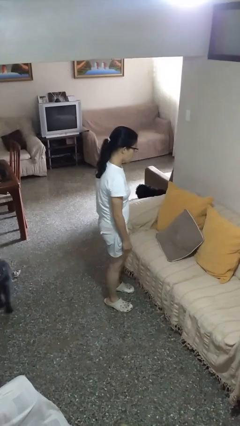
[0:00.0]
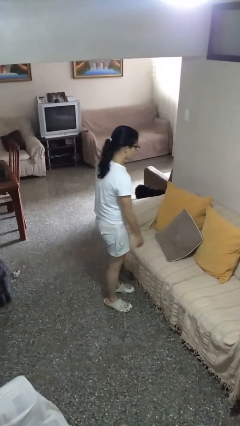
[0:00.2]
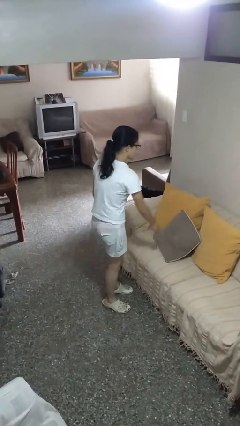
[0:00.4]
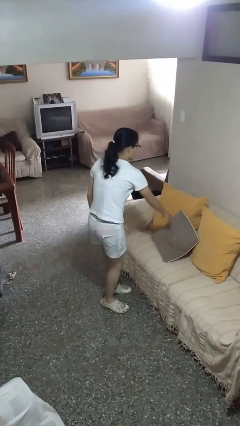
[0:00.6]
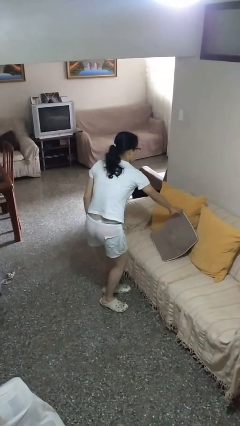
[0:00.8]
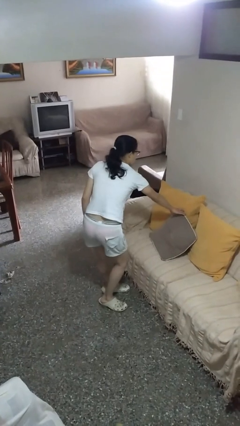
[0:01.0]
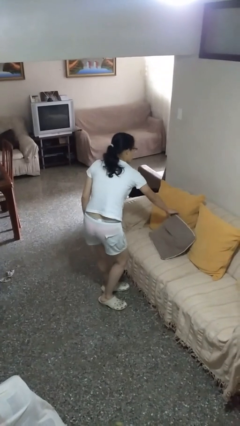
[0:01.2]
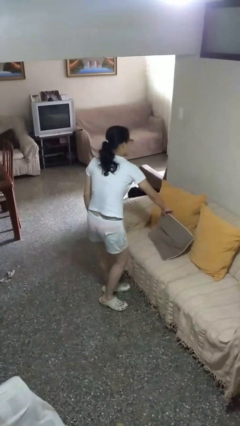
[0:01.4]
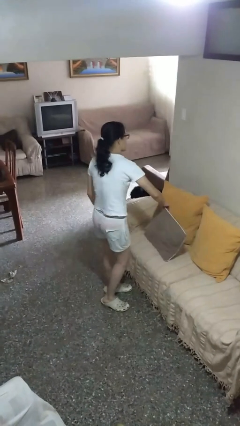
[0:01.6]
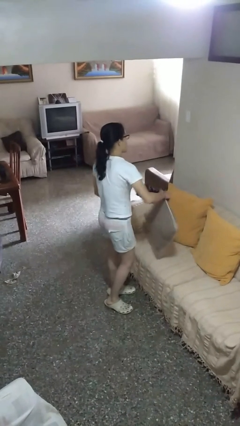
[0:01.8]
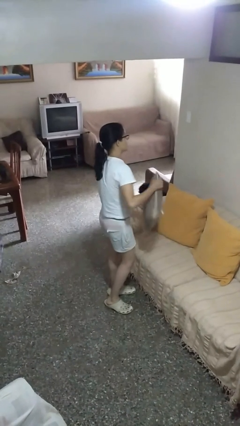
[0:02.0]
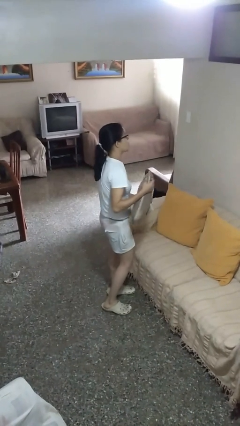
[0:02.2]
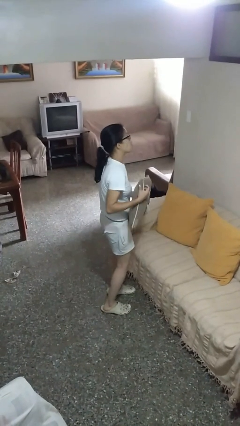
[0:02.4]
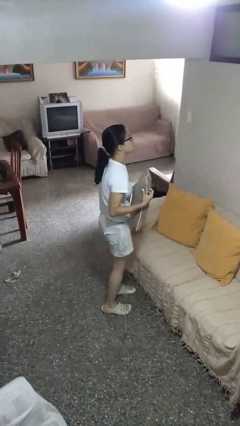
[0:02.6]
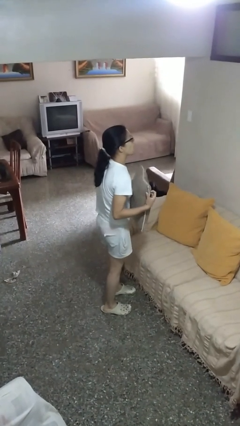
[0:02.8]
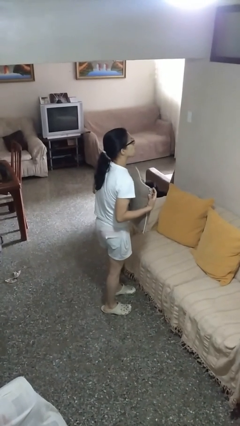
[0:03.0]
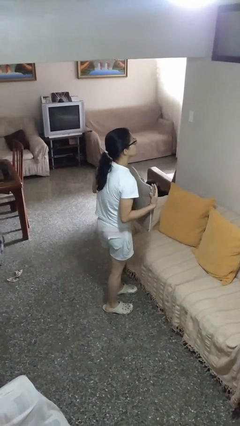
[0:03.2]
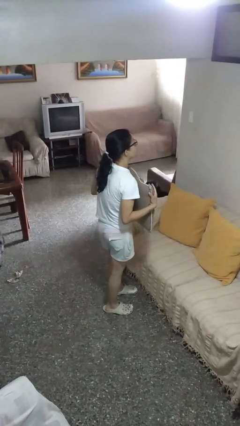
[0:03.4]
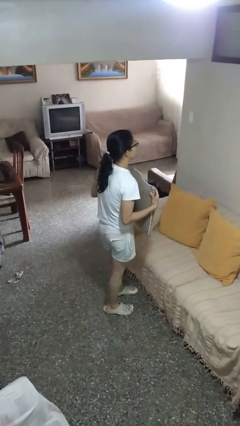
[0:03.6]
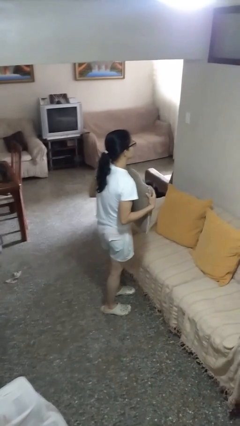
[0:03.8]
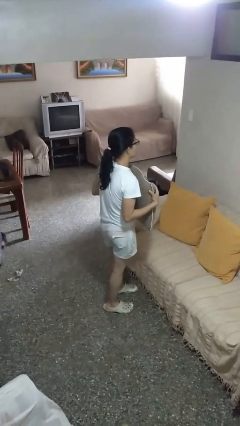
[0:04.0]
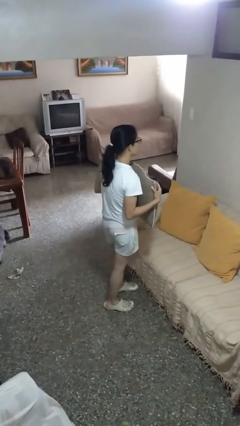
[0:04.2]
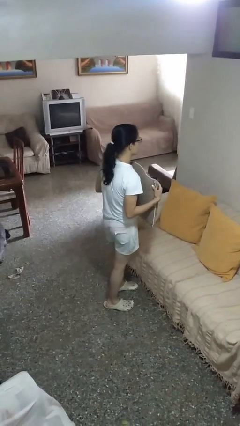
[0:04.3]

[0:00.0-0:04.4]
person picks up object from couch

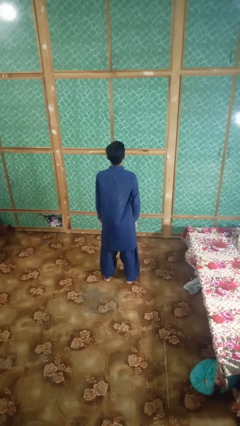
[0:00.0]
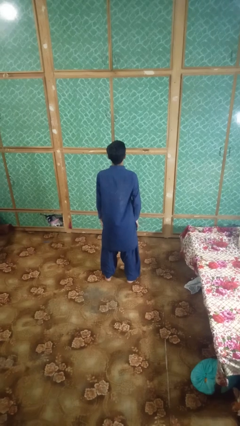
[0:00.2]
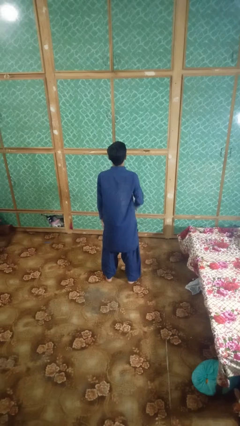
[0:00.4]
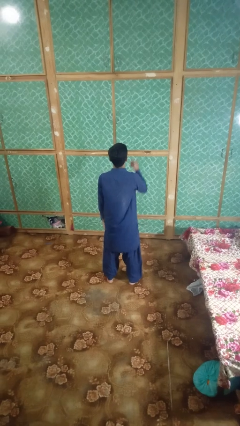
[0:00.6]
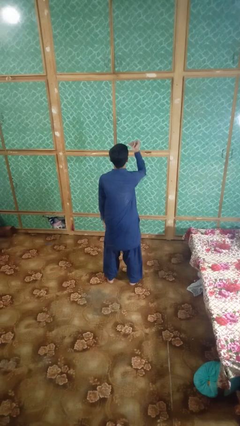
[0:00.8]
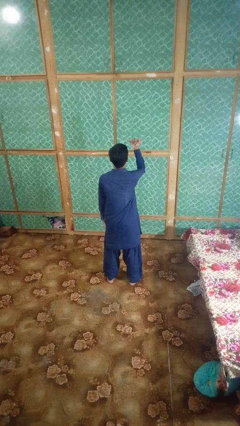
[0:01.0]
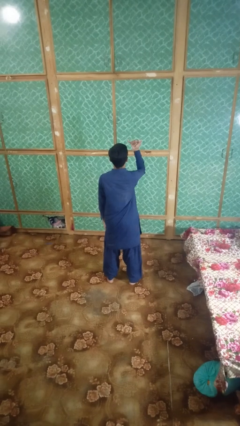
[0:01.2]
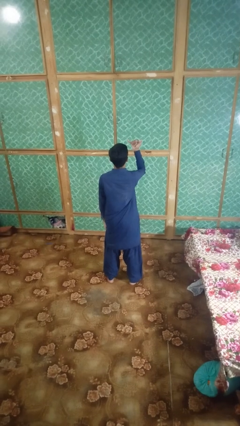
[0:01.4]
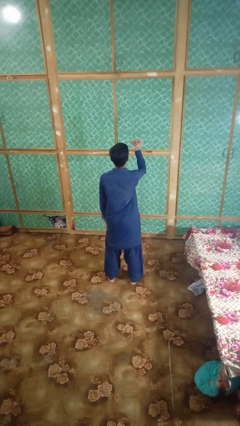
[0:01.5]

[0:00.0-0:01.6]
person gestures hang loose

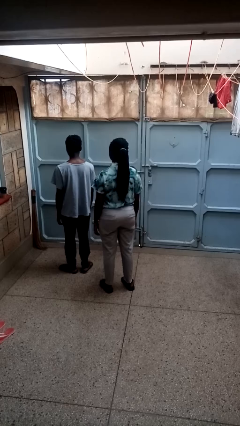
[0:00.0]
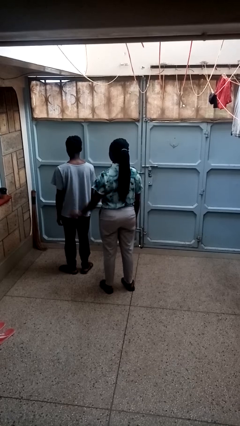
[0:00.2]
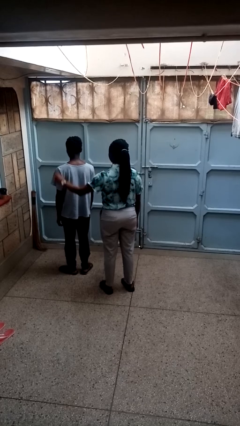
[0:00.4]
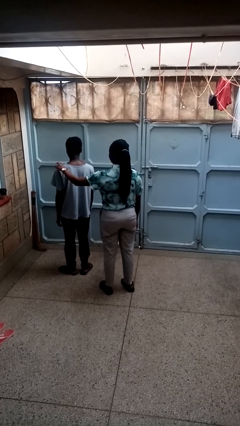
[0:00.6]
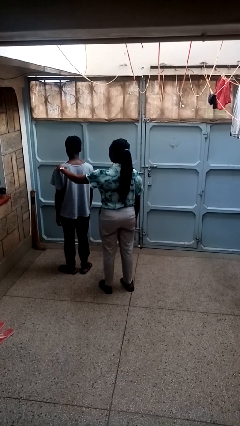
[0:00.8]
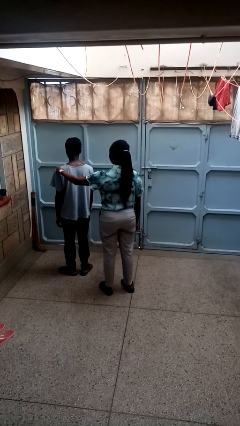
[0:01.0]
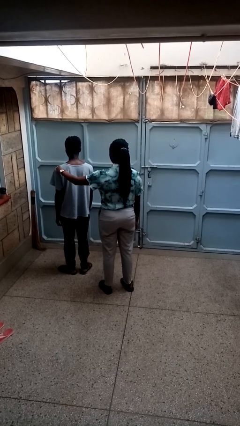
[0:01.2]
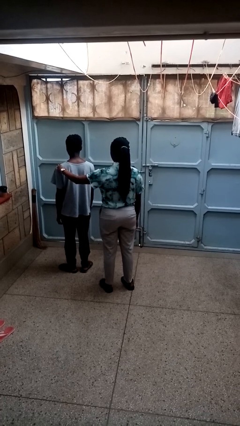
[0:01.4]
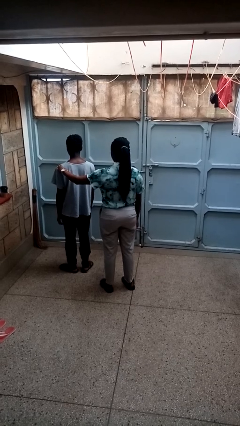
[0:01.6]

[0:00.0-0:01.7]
person grabs person by shoulder

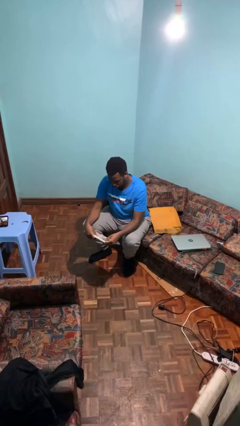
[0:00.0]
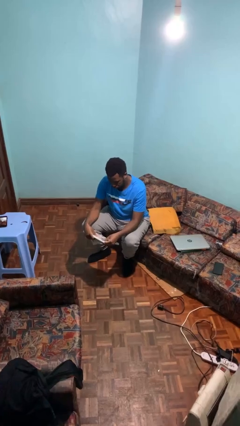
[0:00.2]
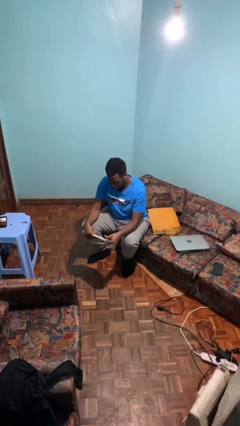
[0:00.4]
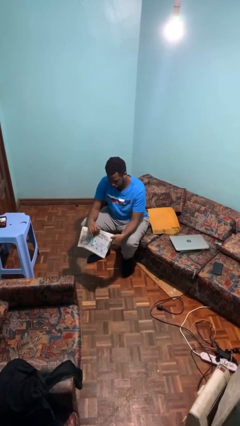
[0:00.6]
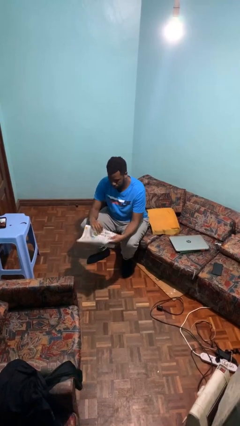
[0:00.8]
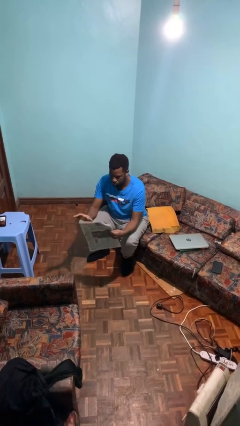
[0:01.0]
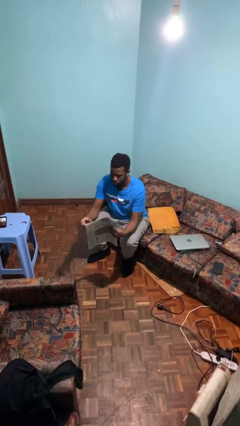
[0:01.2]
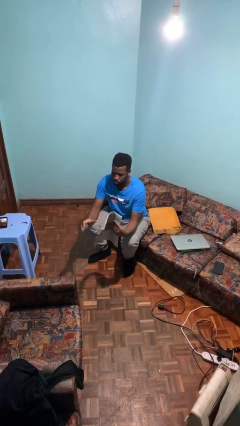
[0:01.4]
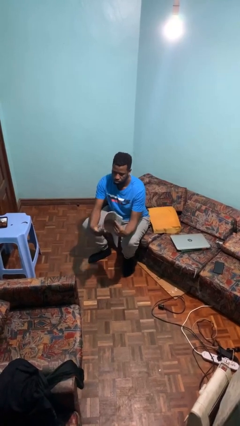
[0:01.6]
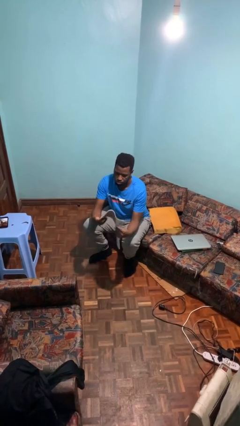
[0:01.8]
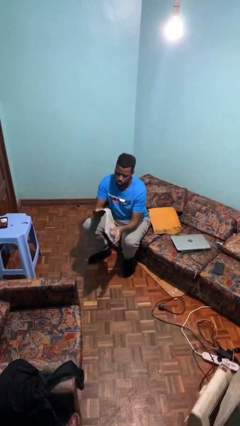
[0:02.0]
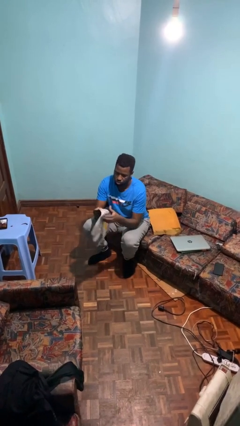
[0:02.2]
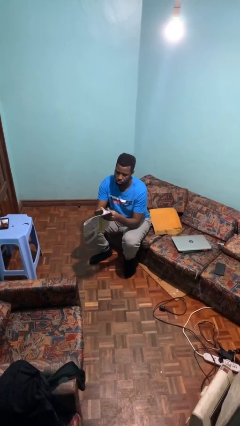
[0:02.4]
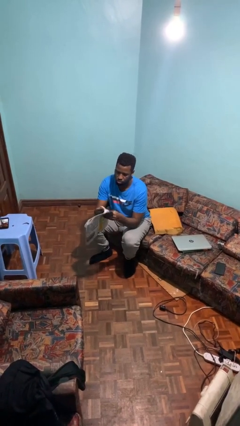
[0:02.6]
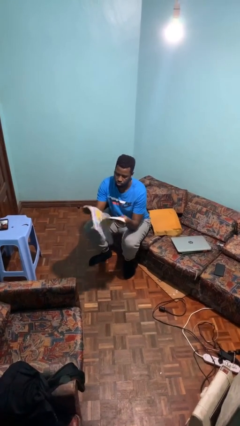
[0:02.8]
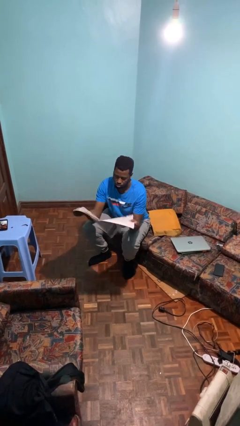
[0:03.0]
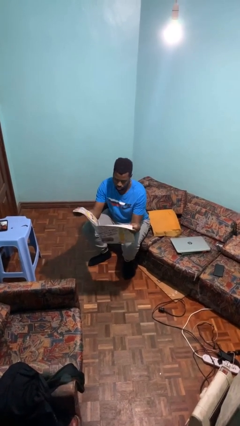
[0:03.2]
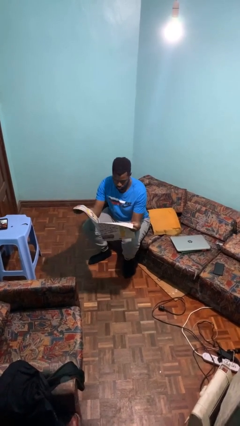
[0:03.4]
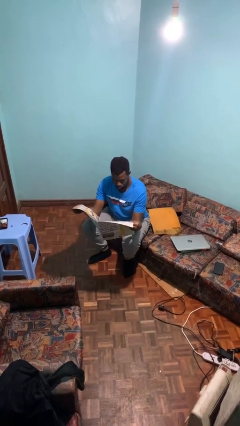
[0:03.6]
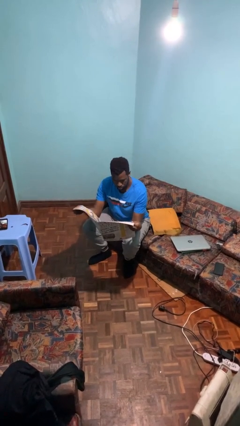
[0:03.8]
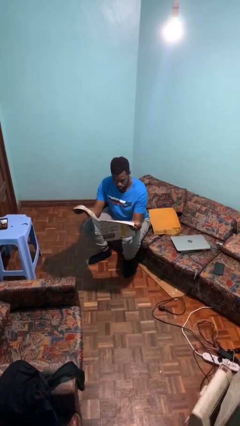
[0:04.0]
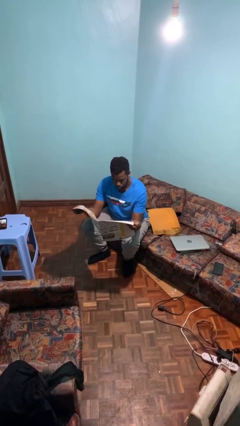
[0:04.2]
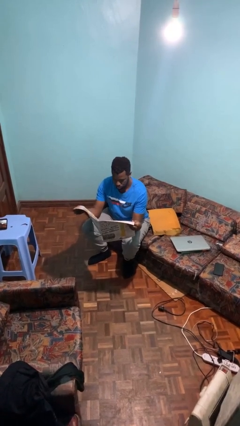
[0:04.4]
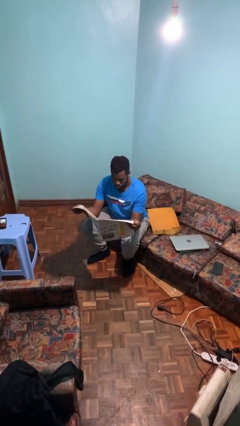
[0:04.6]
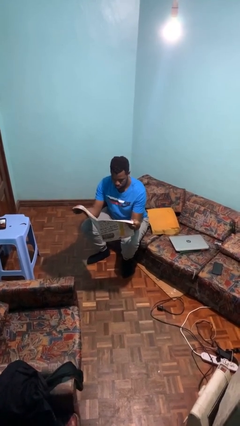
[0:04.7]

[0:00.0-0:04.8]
person reads newspaper

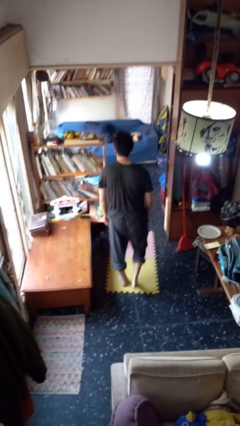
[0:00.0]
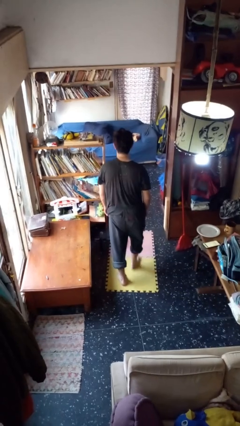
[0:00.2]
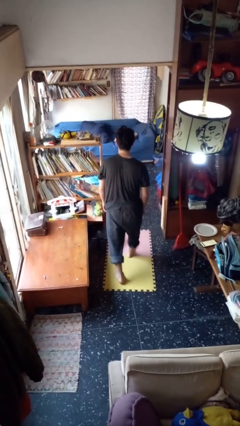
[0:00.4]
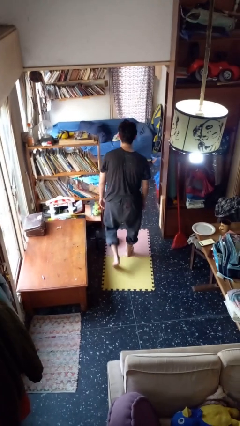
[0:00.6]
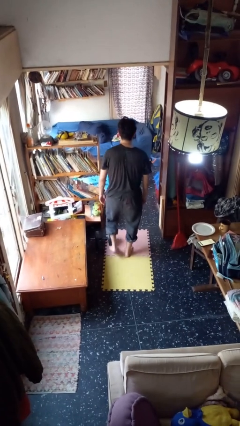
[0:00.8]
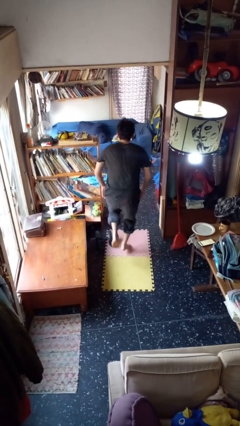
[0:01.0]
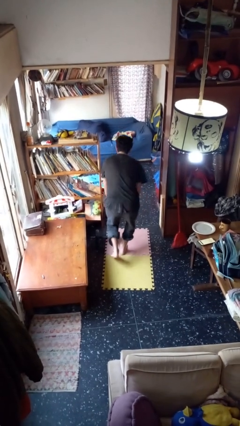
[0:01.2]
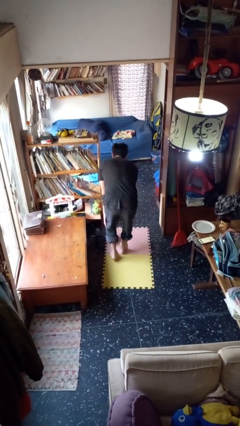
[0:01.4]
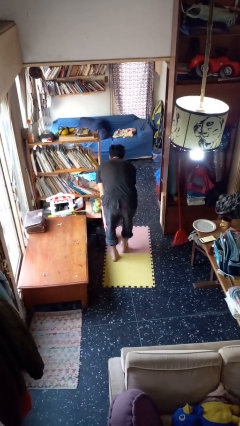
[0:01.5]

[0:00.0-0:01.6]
person stubs toe

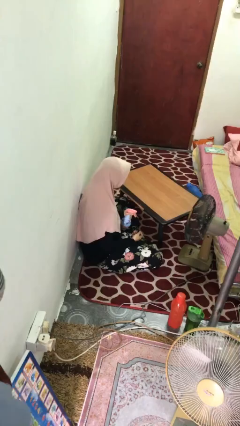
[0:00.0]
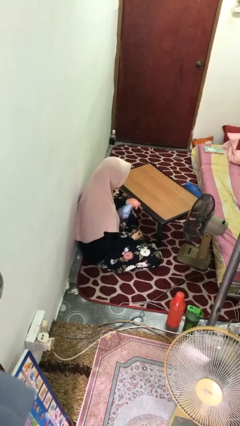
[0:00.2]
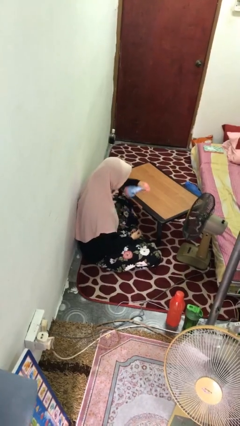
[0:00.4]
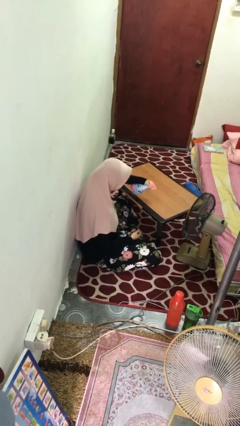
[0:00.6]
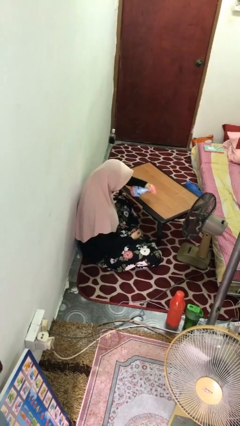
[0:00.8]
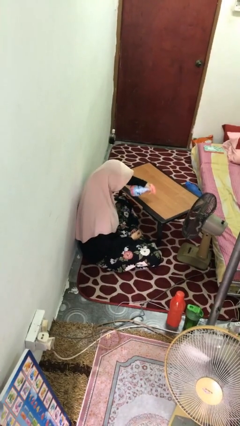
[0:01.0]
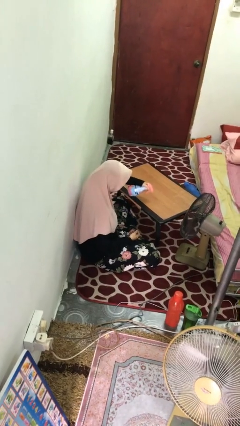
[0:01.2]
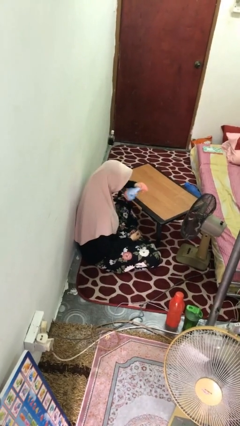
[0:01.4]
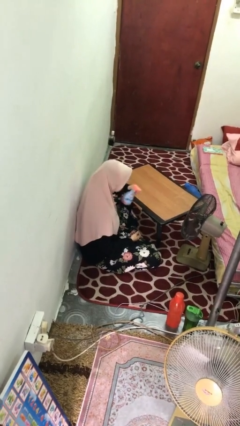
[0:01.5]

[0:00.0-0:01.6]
person sprays from bottle

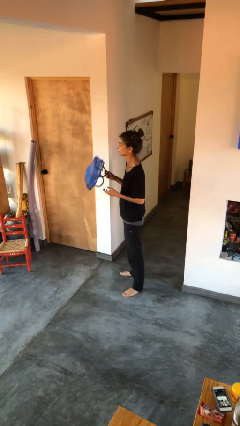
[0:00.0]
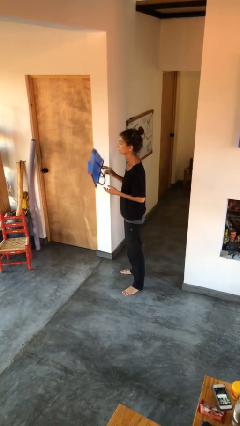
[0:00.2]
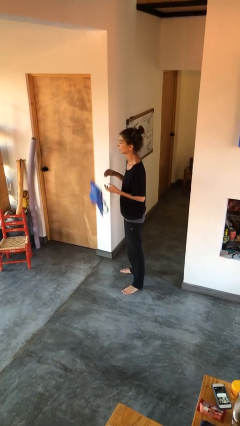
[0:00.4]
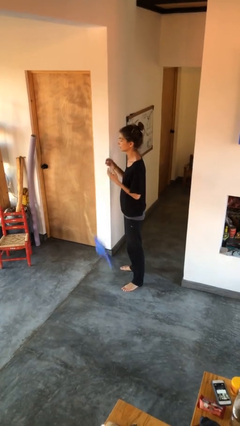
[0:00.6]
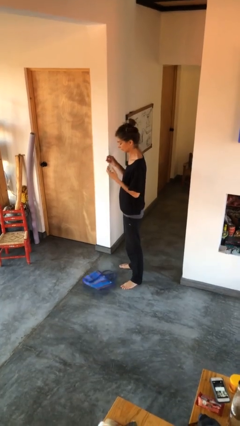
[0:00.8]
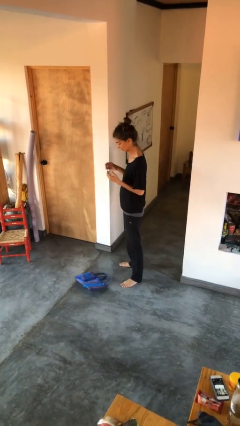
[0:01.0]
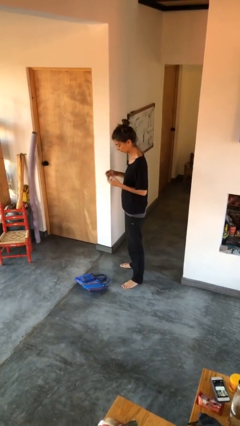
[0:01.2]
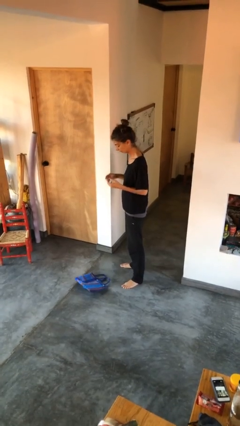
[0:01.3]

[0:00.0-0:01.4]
person drops object
